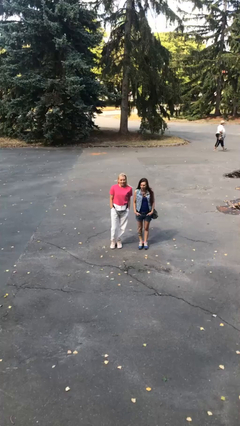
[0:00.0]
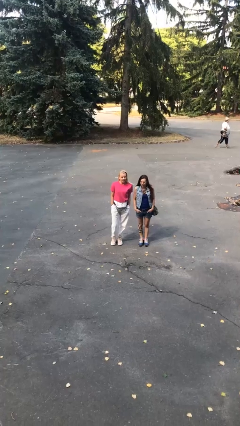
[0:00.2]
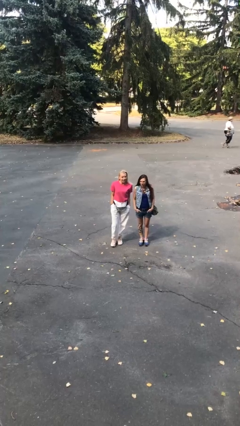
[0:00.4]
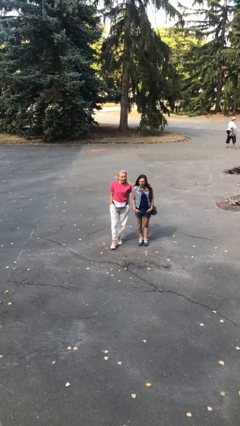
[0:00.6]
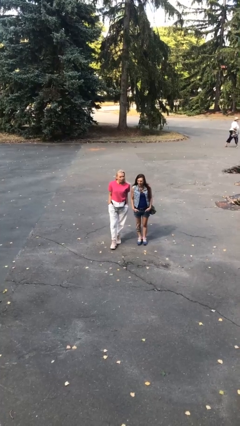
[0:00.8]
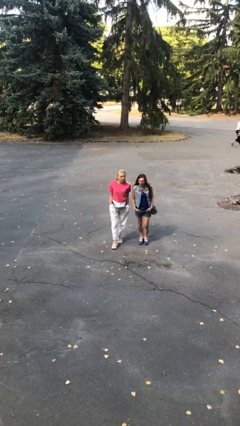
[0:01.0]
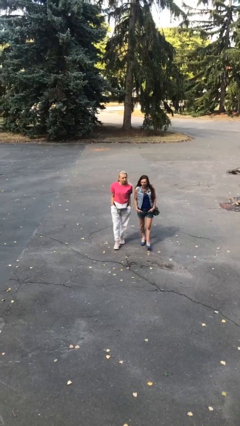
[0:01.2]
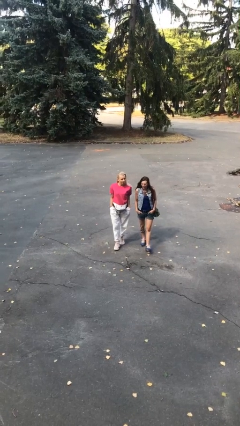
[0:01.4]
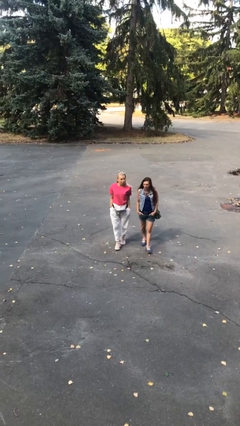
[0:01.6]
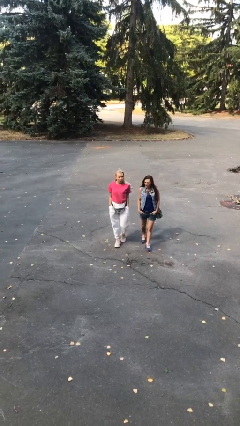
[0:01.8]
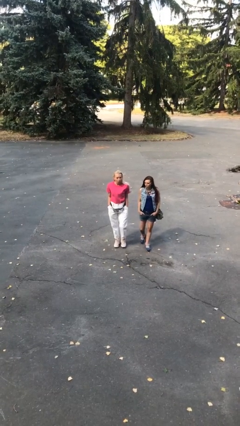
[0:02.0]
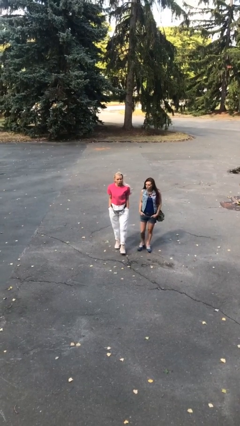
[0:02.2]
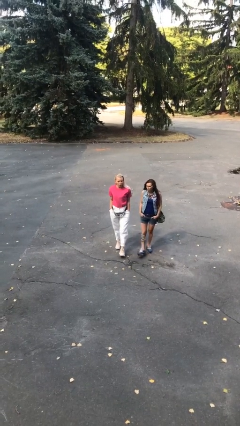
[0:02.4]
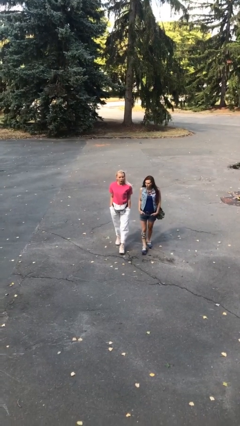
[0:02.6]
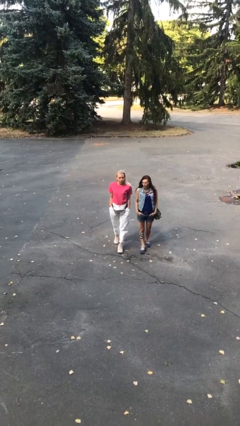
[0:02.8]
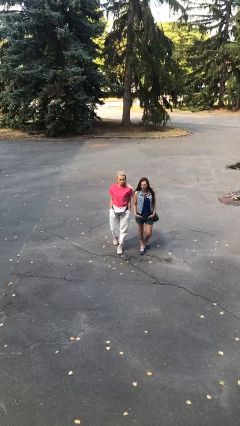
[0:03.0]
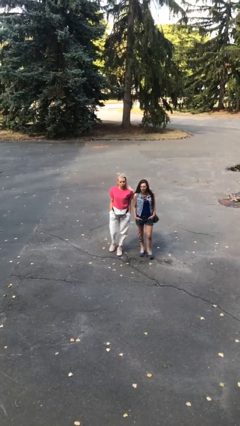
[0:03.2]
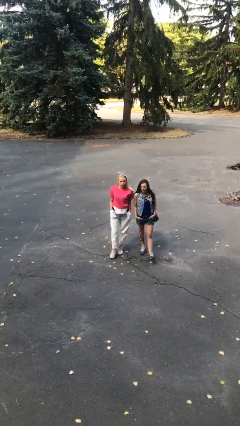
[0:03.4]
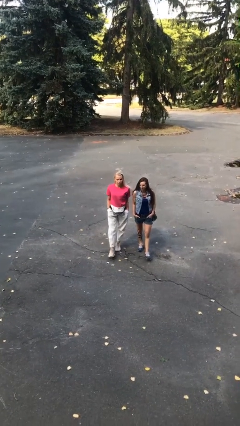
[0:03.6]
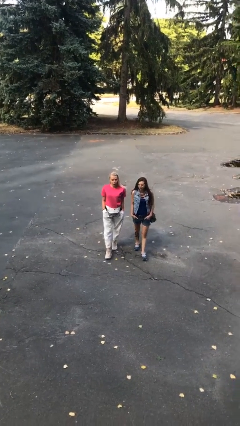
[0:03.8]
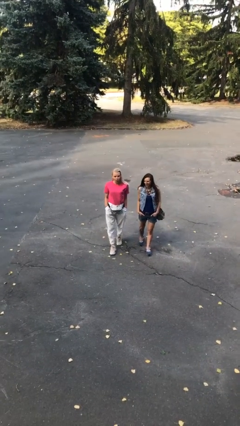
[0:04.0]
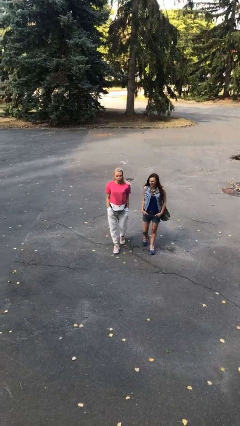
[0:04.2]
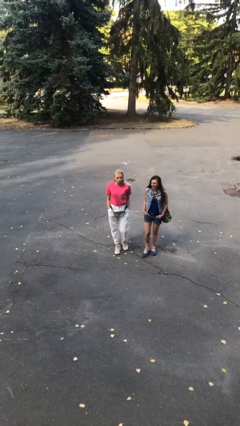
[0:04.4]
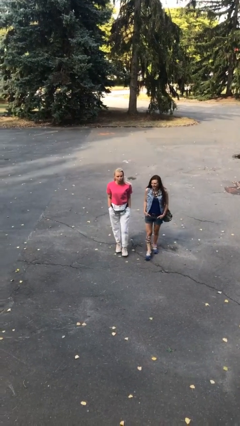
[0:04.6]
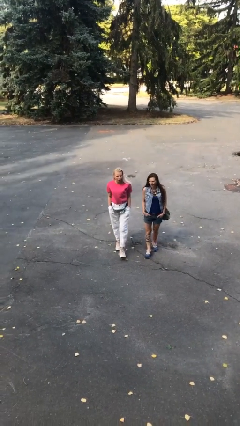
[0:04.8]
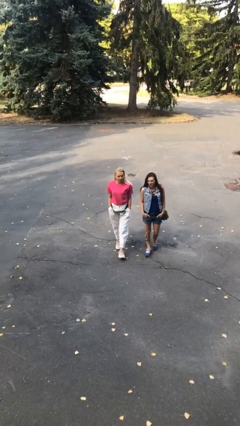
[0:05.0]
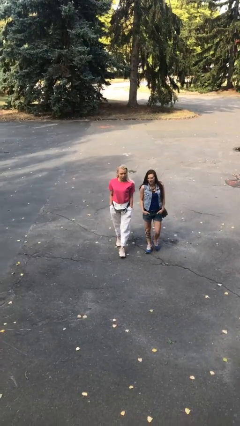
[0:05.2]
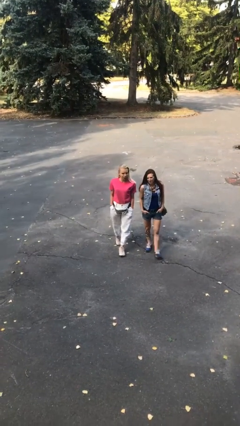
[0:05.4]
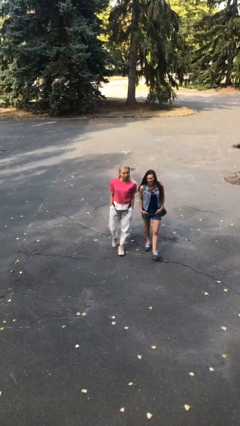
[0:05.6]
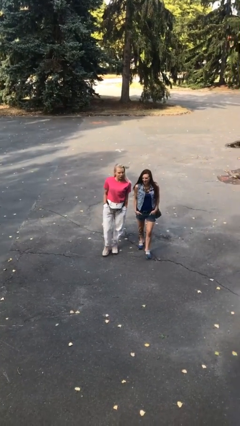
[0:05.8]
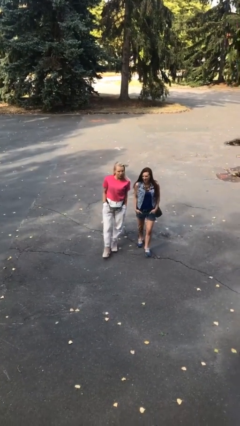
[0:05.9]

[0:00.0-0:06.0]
person talks to person

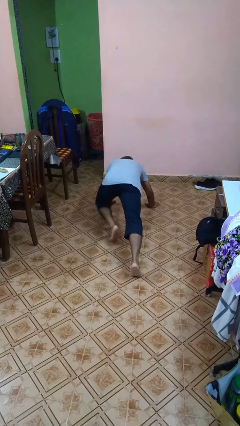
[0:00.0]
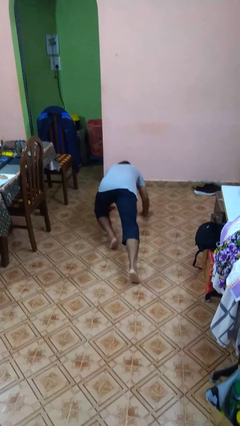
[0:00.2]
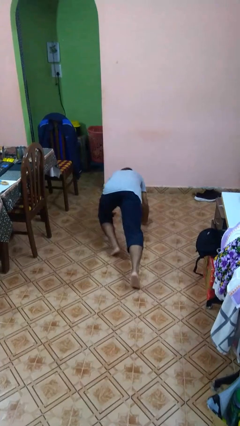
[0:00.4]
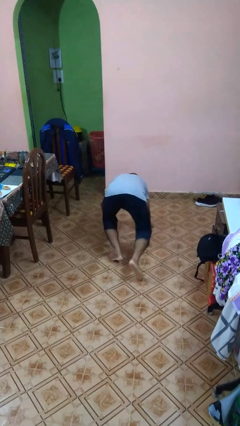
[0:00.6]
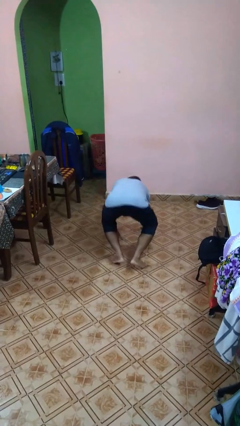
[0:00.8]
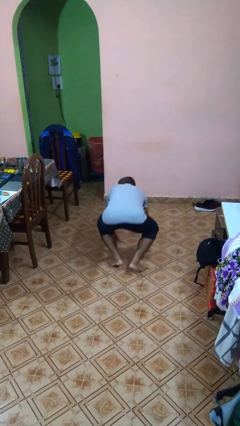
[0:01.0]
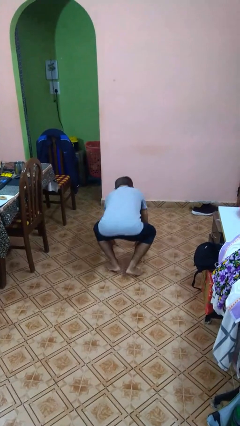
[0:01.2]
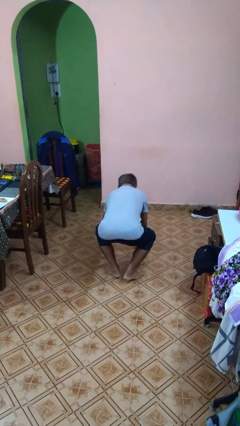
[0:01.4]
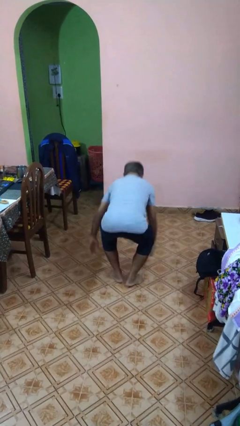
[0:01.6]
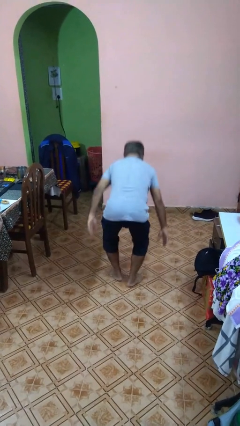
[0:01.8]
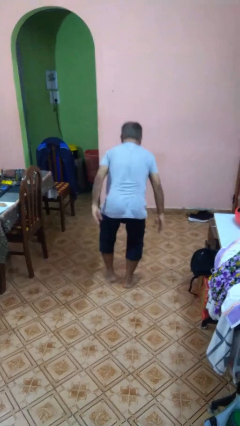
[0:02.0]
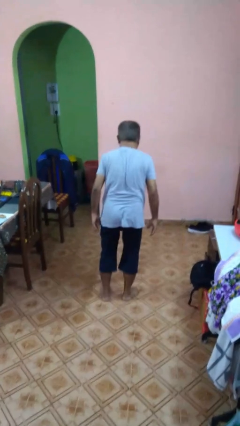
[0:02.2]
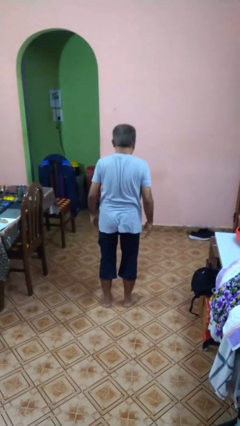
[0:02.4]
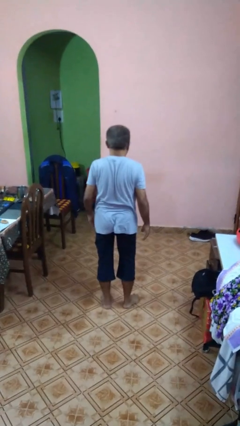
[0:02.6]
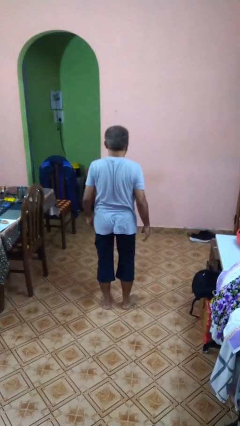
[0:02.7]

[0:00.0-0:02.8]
person stands up from floor

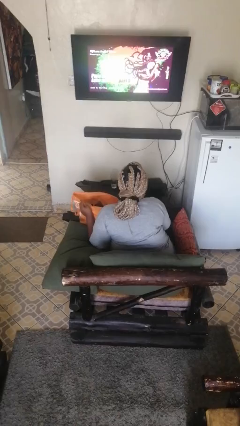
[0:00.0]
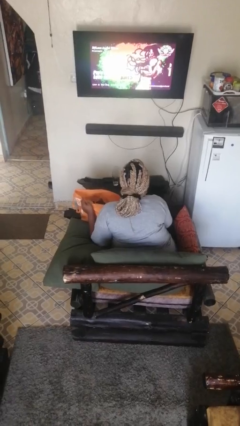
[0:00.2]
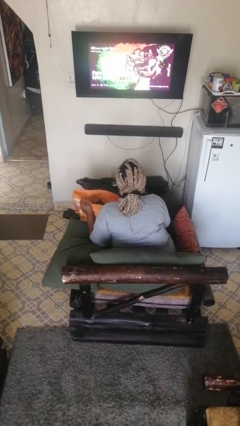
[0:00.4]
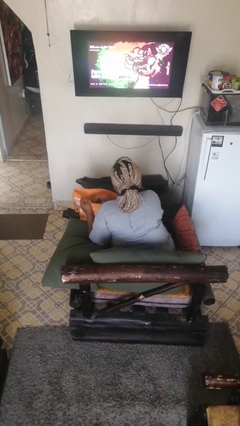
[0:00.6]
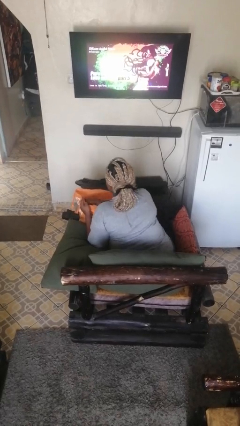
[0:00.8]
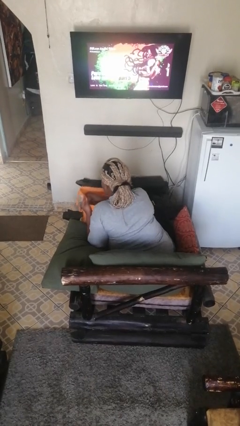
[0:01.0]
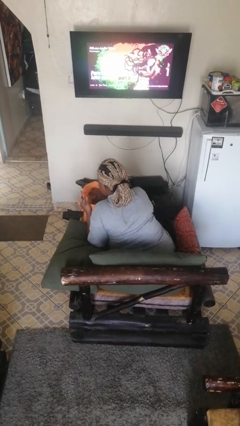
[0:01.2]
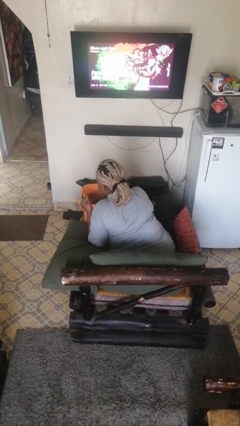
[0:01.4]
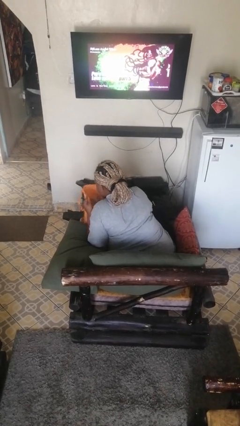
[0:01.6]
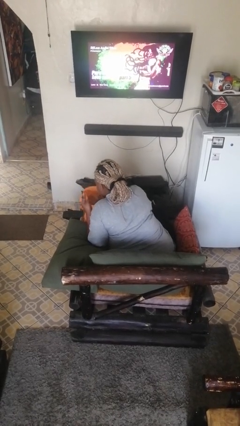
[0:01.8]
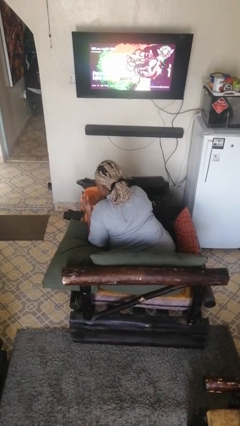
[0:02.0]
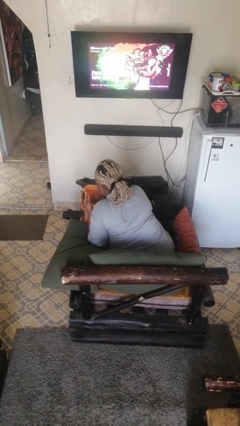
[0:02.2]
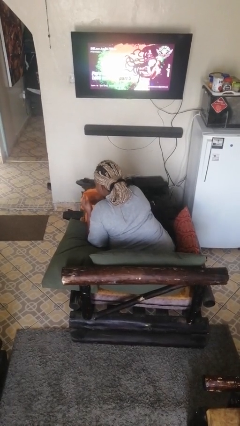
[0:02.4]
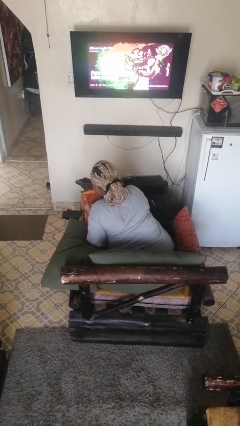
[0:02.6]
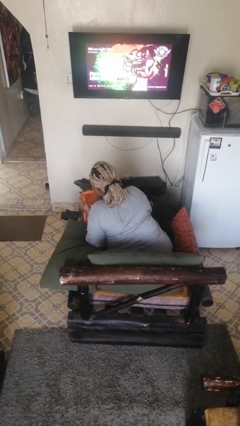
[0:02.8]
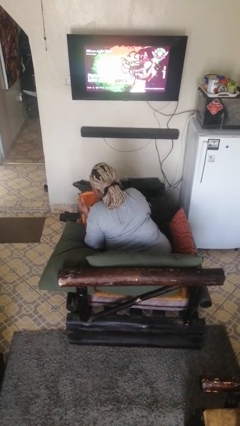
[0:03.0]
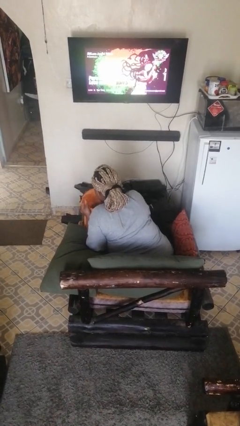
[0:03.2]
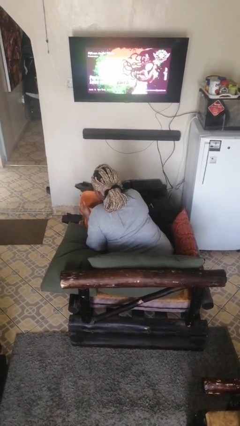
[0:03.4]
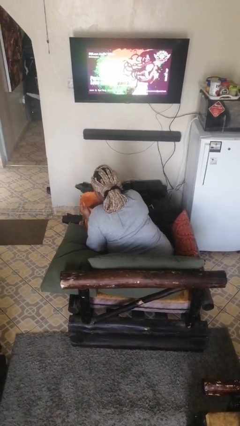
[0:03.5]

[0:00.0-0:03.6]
person searches in bag

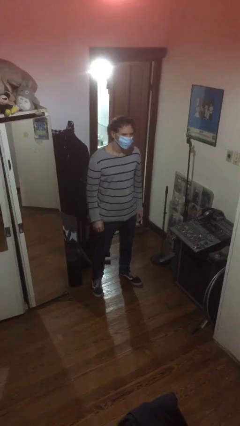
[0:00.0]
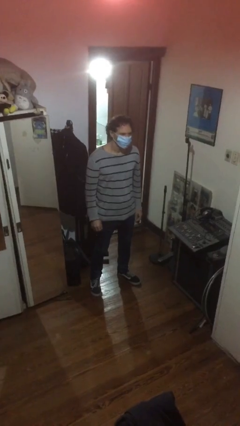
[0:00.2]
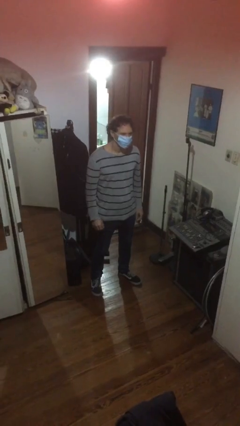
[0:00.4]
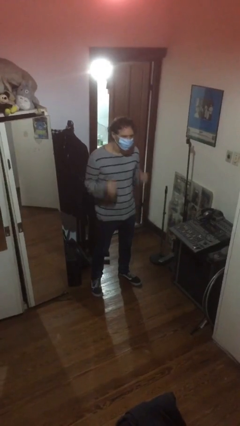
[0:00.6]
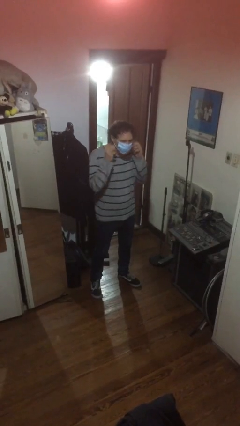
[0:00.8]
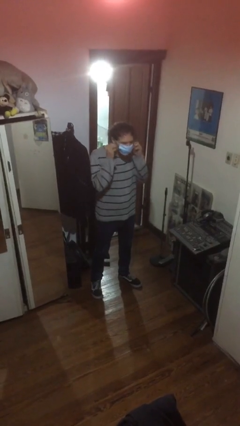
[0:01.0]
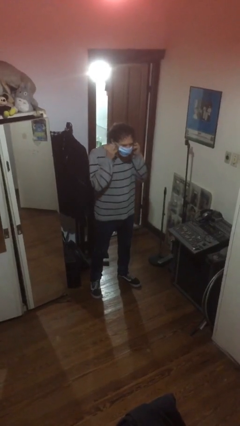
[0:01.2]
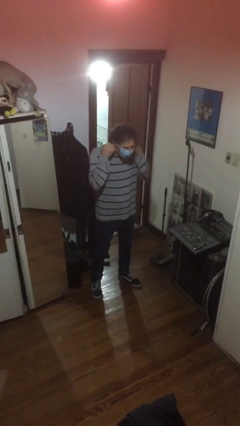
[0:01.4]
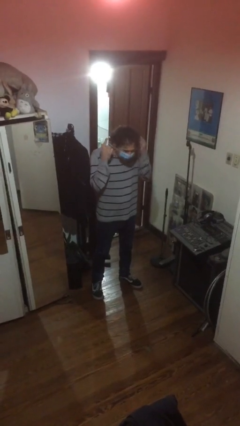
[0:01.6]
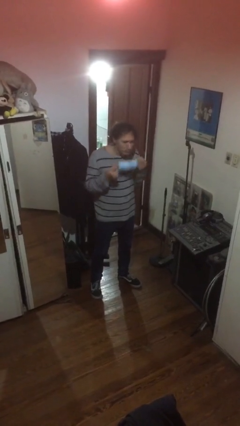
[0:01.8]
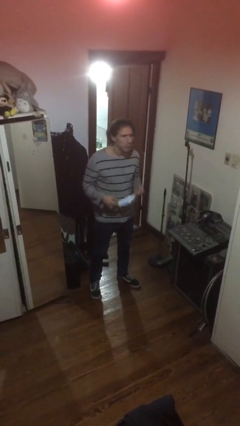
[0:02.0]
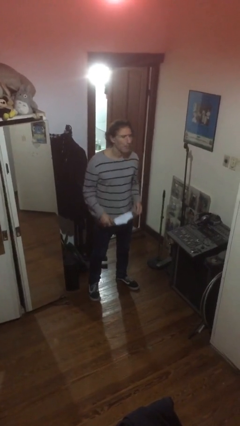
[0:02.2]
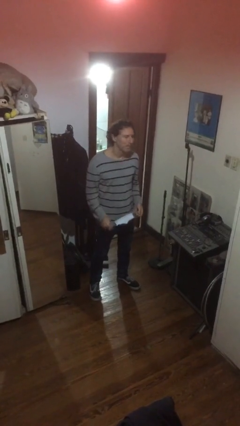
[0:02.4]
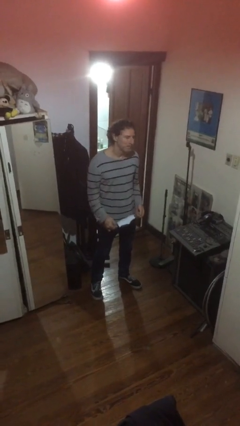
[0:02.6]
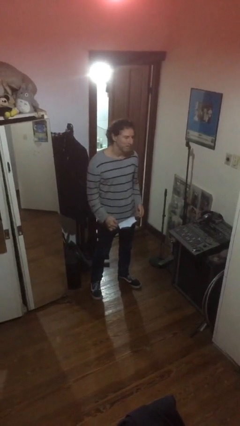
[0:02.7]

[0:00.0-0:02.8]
person takes off facemask

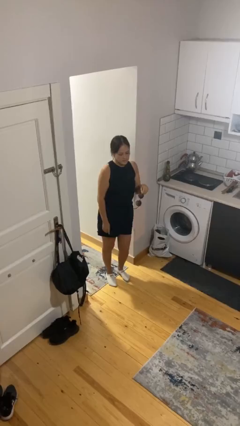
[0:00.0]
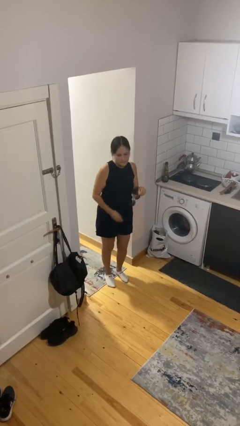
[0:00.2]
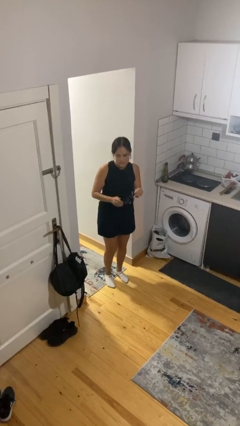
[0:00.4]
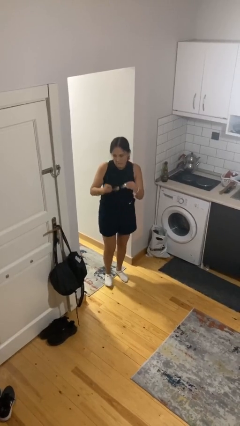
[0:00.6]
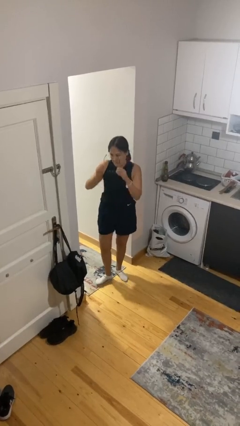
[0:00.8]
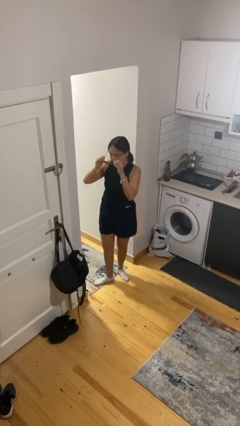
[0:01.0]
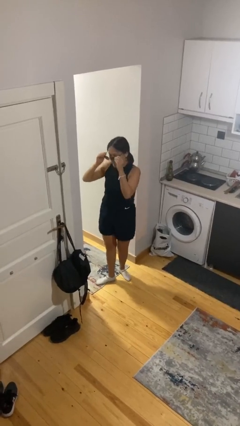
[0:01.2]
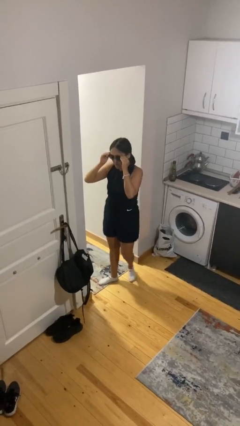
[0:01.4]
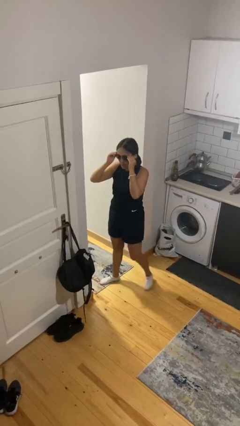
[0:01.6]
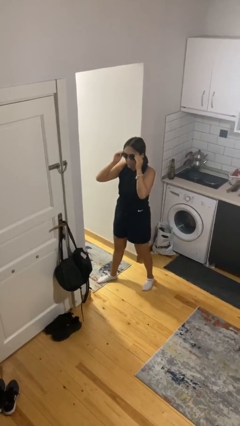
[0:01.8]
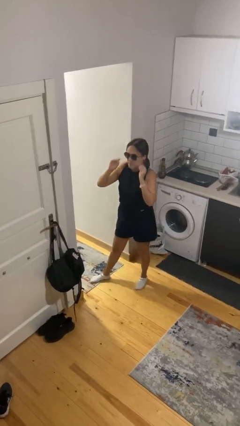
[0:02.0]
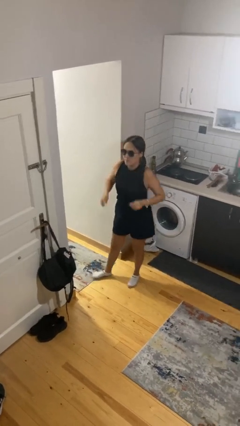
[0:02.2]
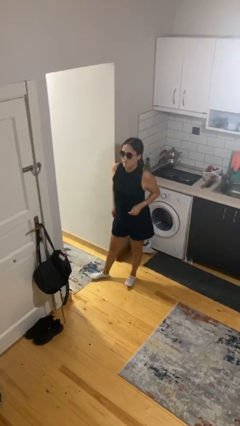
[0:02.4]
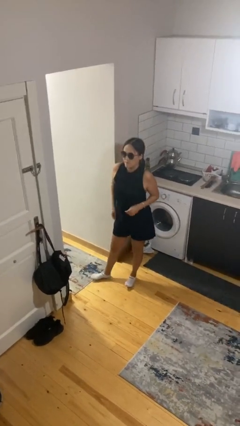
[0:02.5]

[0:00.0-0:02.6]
person puts on sunglasses
